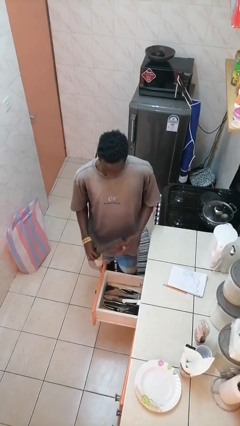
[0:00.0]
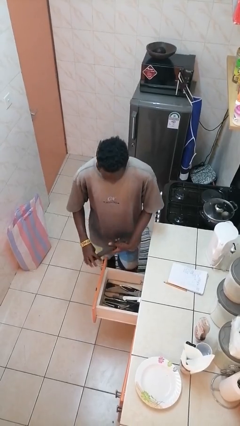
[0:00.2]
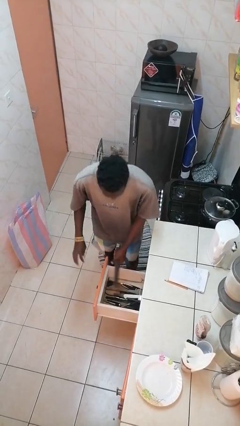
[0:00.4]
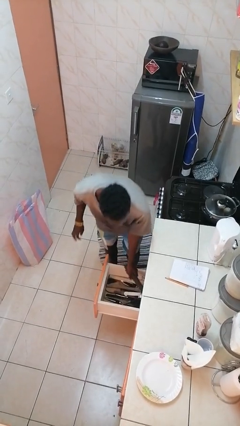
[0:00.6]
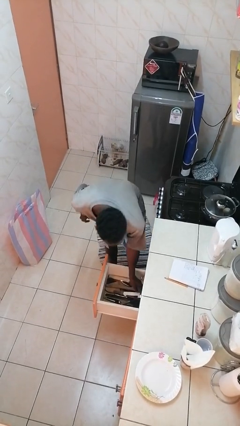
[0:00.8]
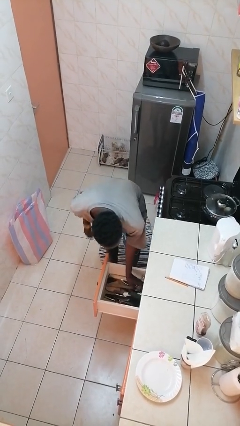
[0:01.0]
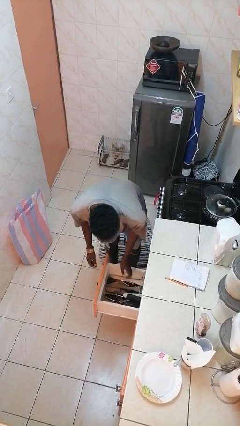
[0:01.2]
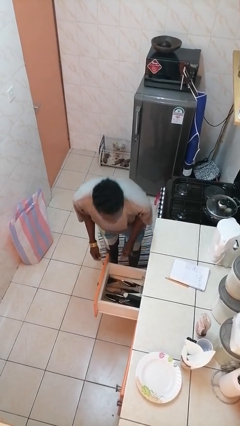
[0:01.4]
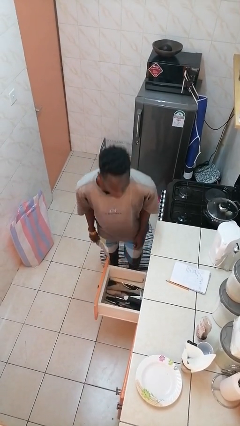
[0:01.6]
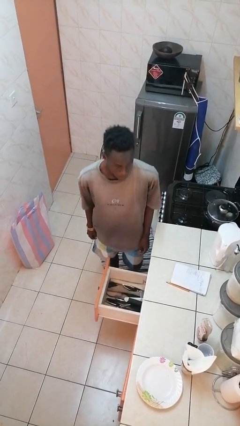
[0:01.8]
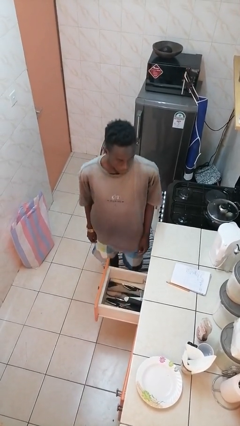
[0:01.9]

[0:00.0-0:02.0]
person puts object into kitchen drawer

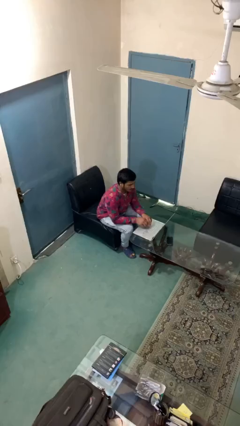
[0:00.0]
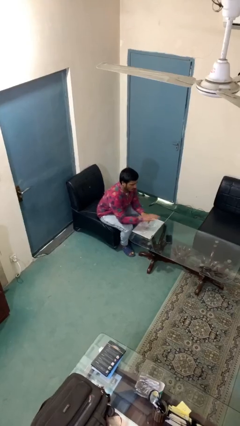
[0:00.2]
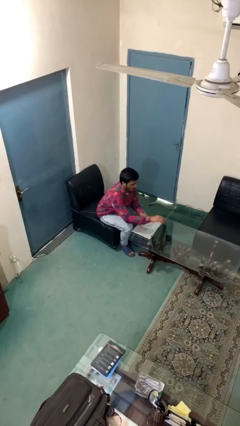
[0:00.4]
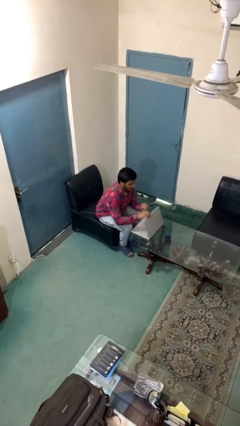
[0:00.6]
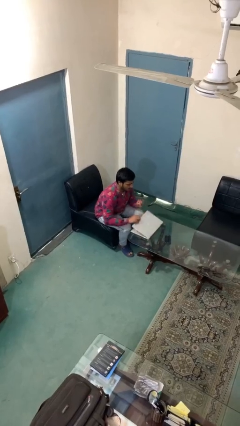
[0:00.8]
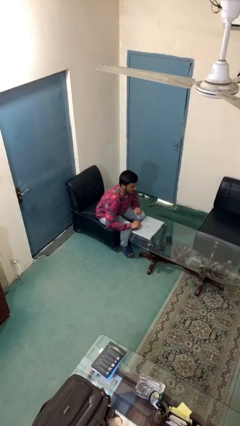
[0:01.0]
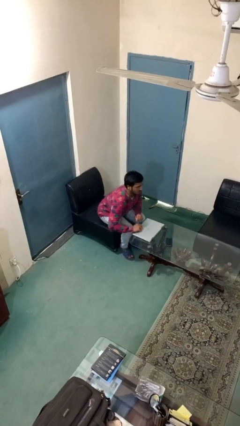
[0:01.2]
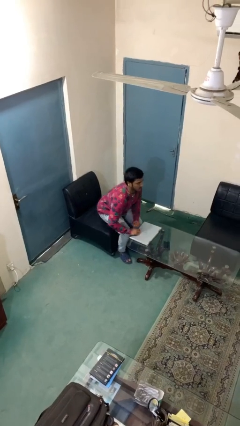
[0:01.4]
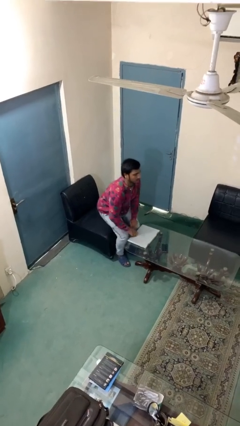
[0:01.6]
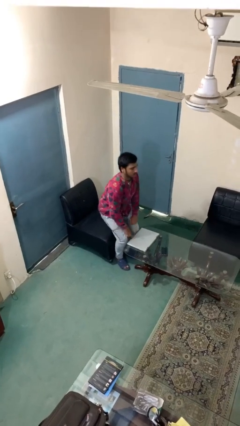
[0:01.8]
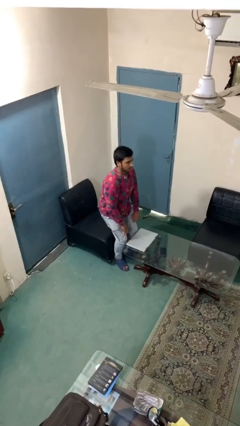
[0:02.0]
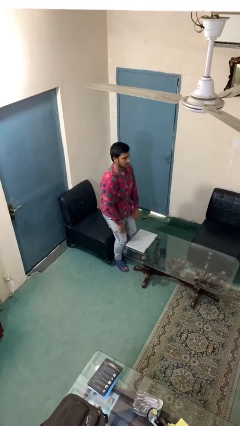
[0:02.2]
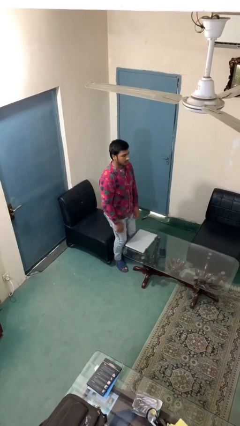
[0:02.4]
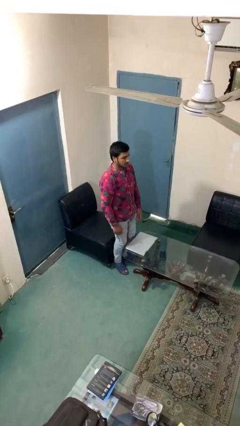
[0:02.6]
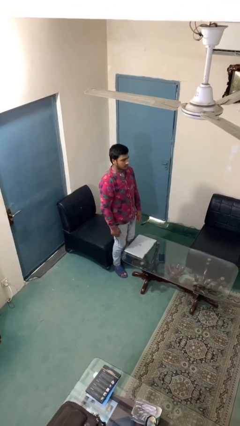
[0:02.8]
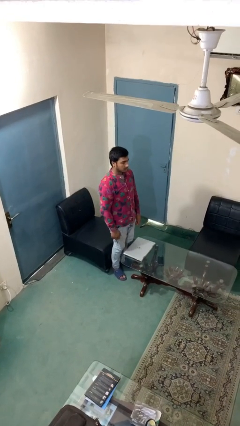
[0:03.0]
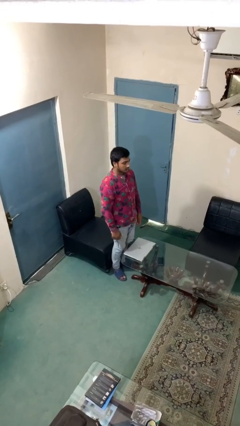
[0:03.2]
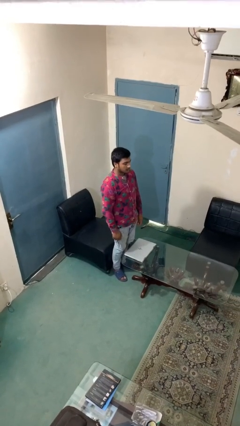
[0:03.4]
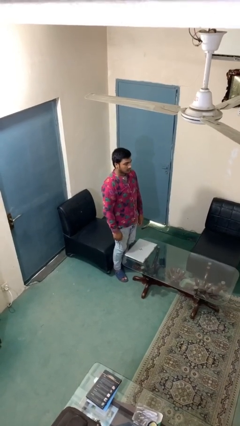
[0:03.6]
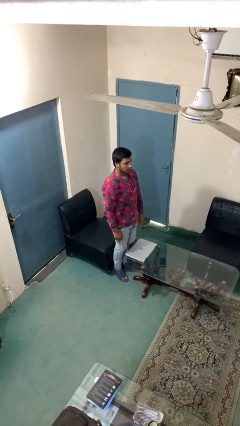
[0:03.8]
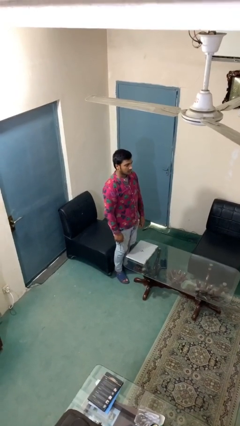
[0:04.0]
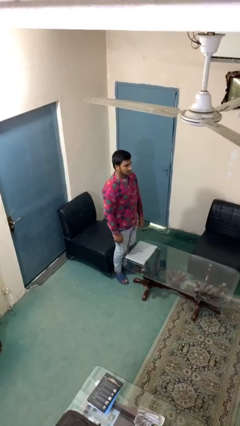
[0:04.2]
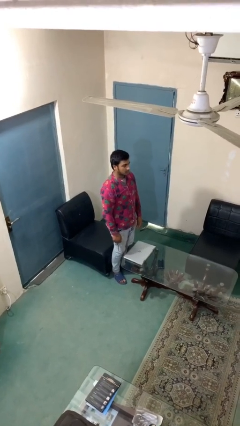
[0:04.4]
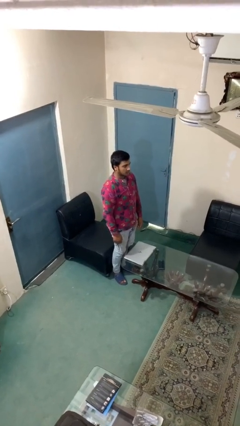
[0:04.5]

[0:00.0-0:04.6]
person stands up

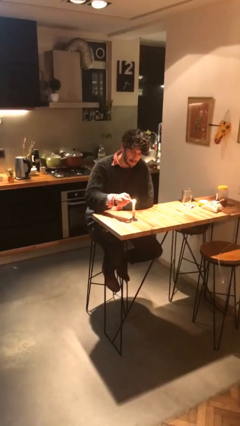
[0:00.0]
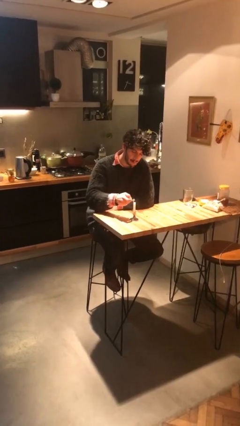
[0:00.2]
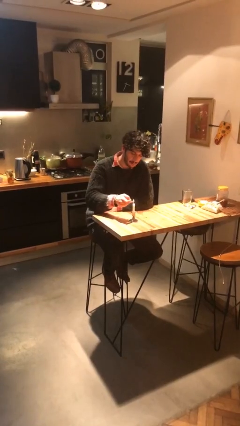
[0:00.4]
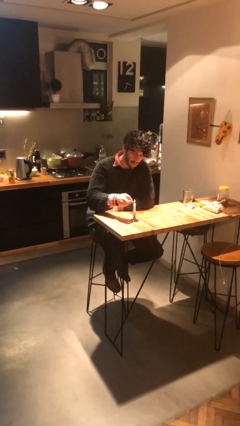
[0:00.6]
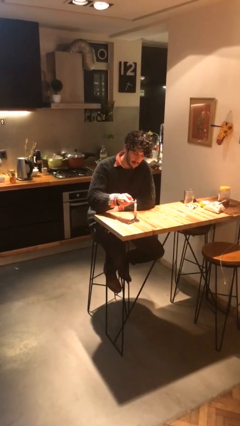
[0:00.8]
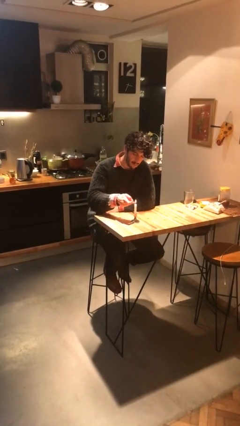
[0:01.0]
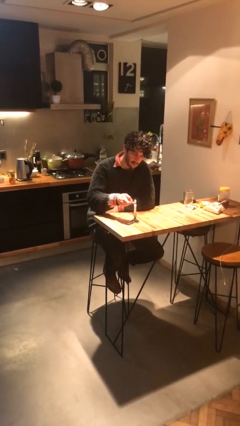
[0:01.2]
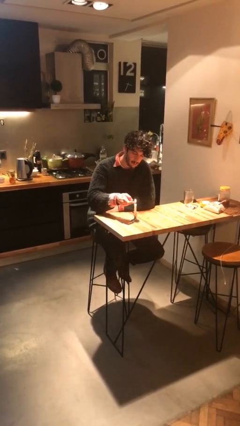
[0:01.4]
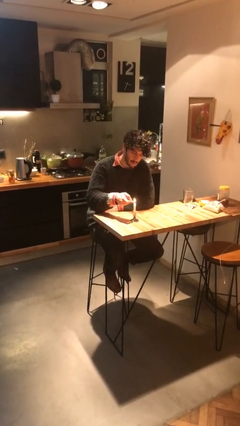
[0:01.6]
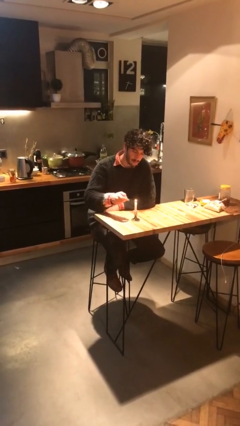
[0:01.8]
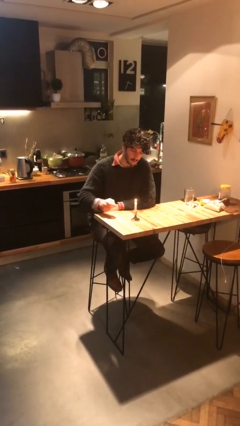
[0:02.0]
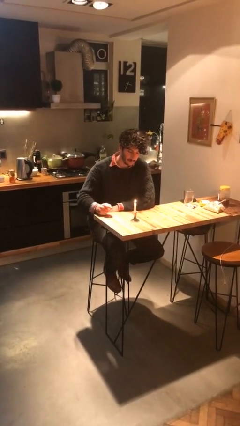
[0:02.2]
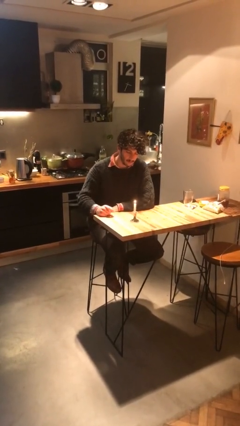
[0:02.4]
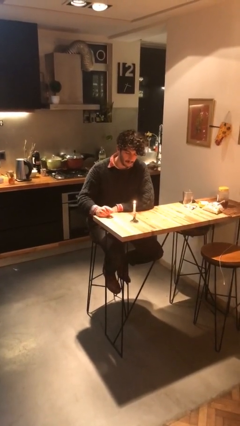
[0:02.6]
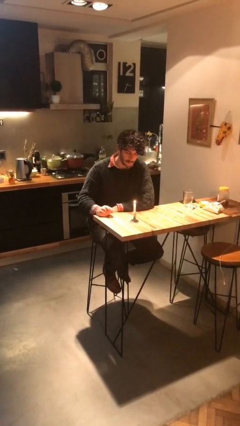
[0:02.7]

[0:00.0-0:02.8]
person lights candle

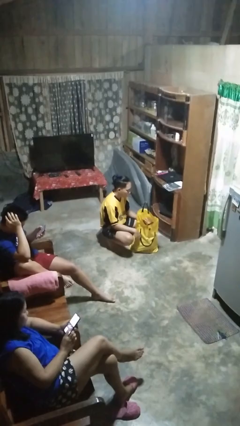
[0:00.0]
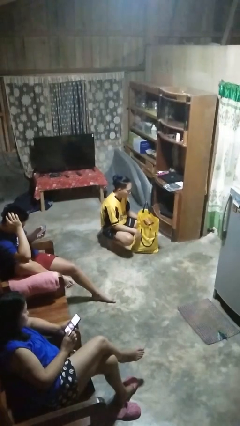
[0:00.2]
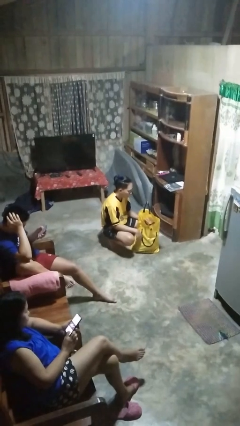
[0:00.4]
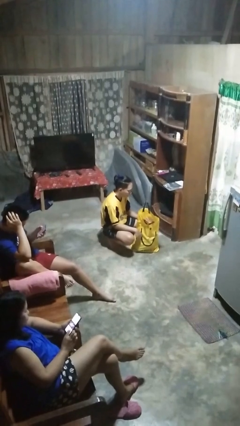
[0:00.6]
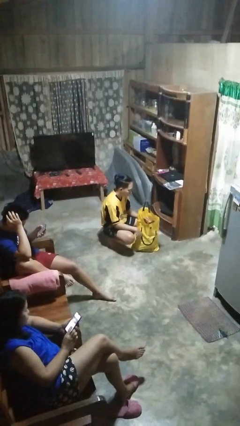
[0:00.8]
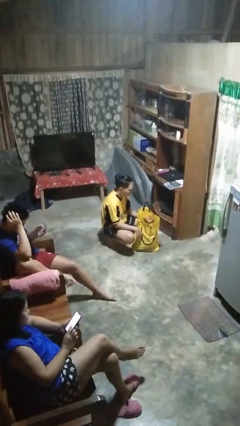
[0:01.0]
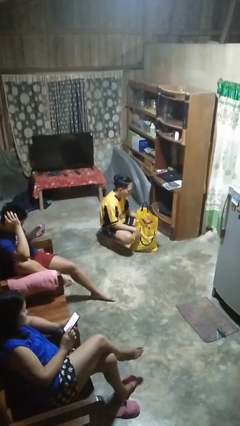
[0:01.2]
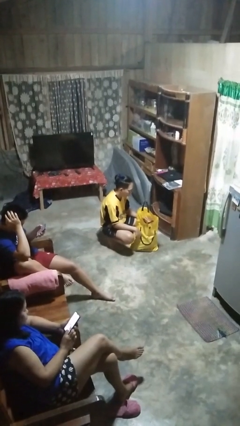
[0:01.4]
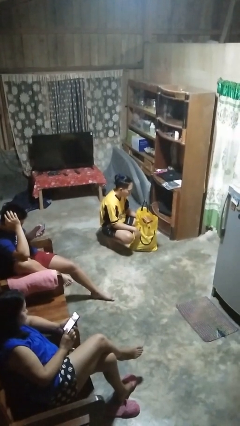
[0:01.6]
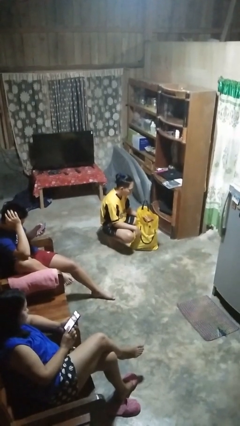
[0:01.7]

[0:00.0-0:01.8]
person searches in bag

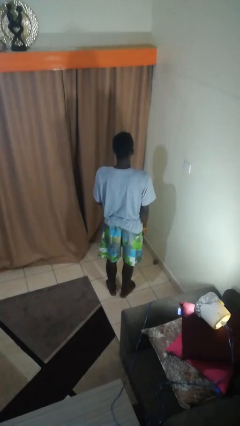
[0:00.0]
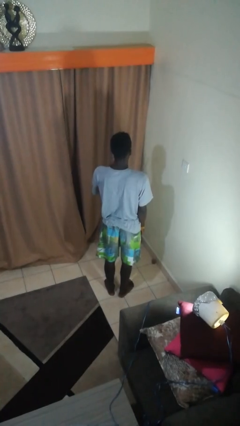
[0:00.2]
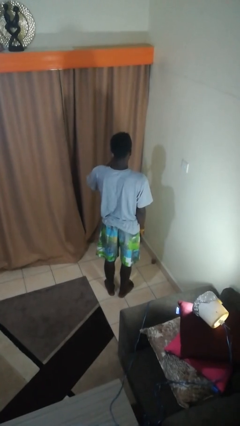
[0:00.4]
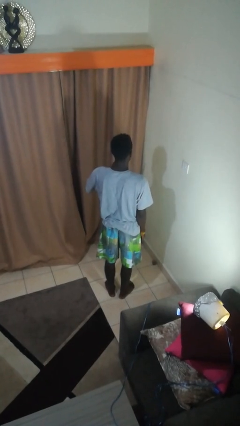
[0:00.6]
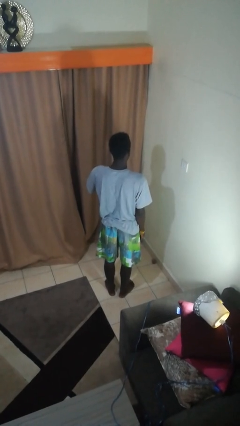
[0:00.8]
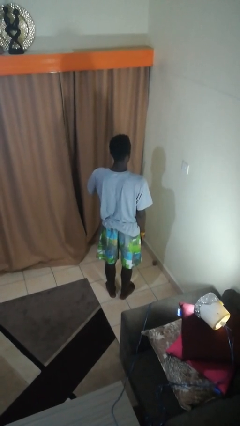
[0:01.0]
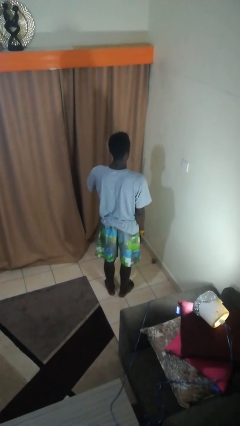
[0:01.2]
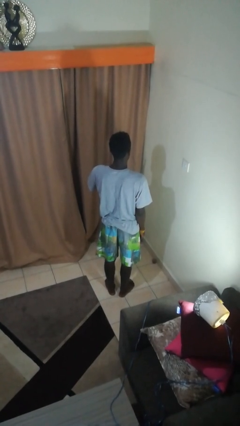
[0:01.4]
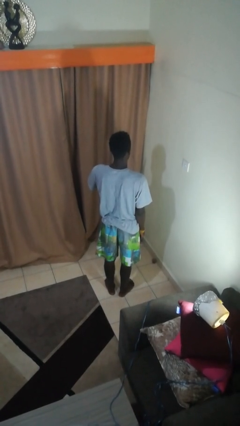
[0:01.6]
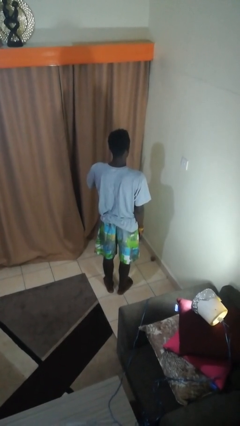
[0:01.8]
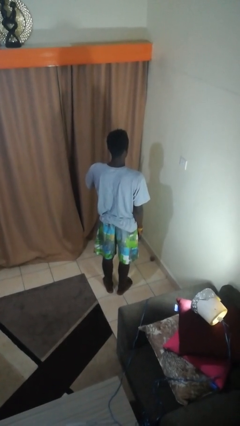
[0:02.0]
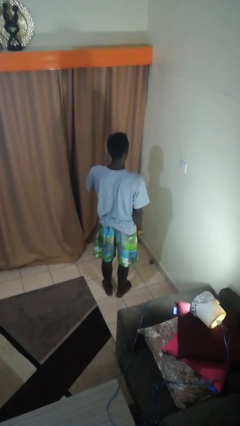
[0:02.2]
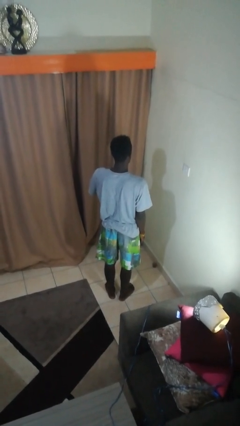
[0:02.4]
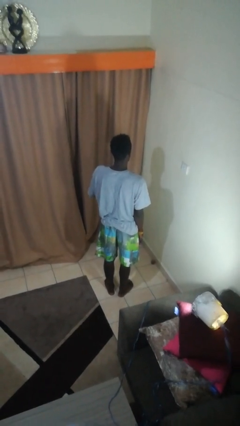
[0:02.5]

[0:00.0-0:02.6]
person gestures number three

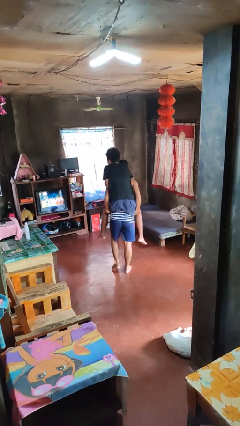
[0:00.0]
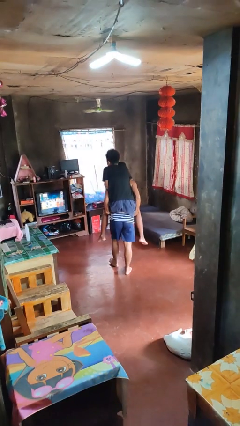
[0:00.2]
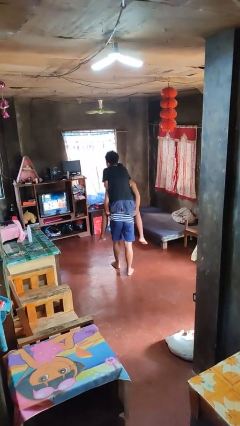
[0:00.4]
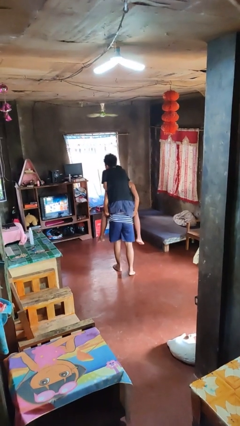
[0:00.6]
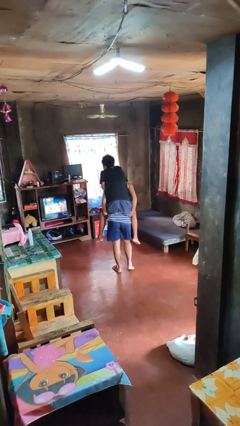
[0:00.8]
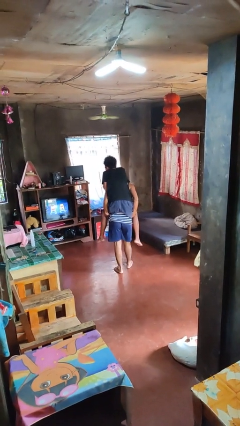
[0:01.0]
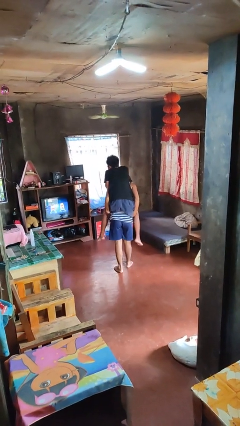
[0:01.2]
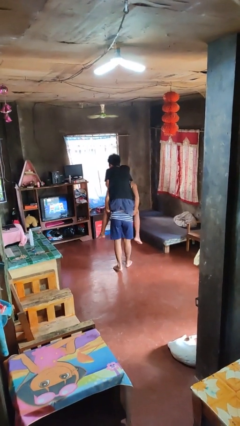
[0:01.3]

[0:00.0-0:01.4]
person carries person on back

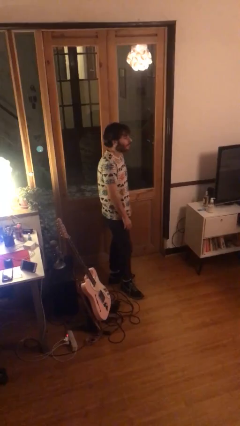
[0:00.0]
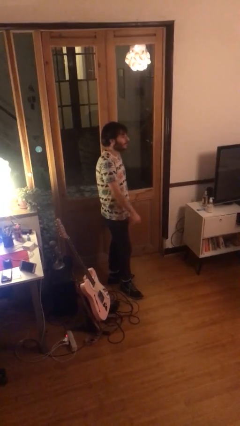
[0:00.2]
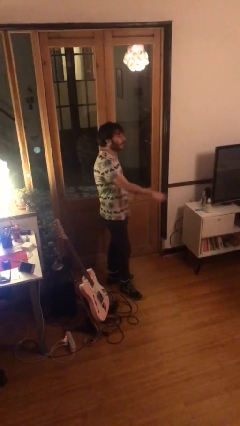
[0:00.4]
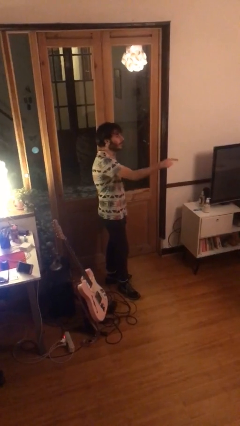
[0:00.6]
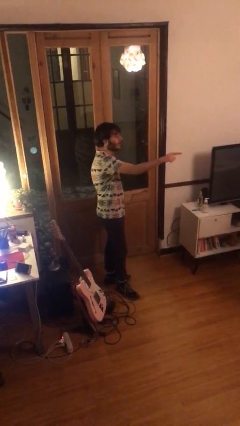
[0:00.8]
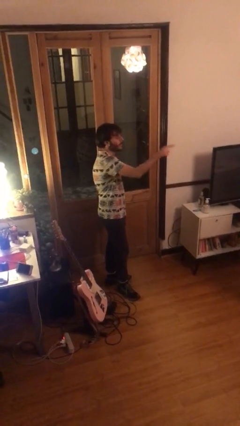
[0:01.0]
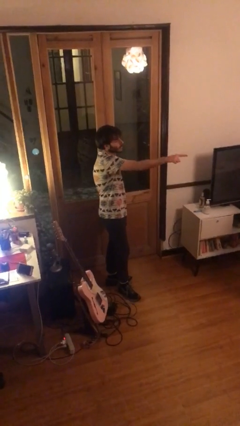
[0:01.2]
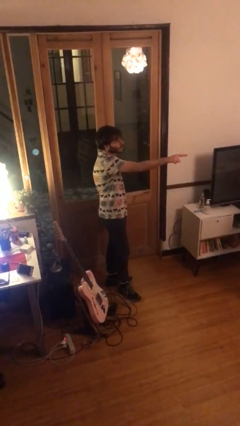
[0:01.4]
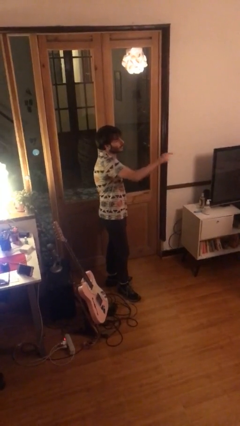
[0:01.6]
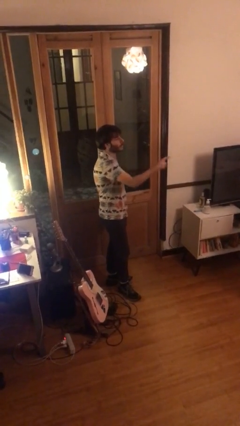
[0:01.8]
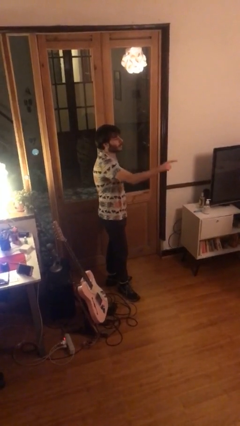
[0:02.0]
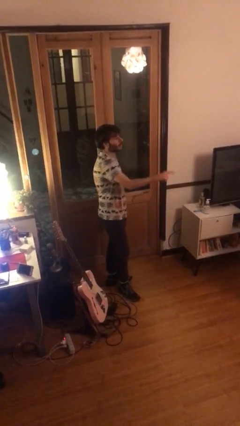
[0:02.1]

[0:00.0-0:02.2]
person points at person
